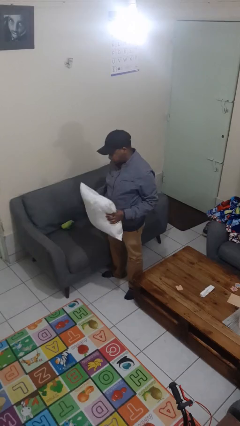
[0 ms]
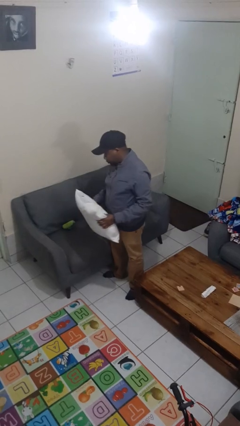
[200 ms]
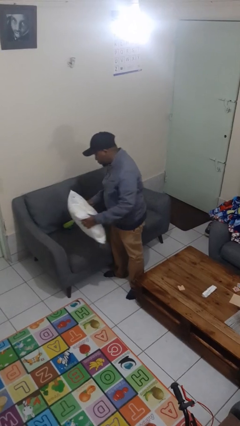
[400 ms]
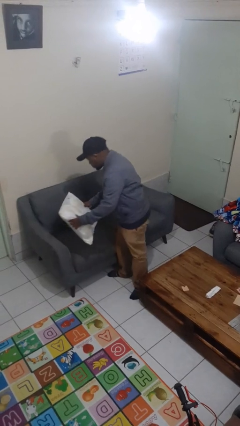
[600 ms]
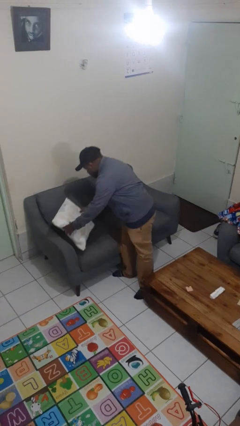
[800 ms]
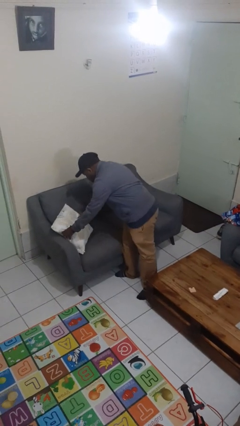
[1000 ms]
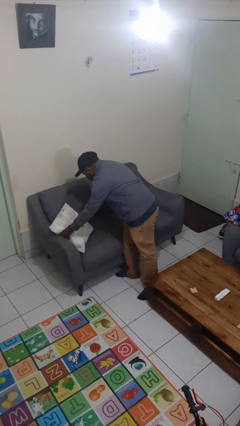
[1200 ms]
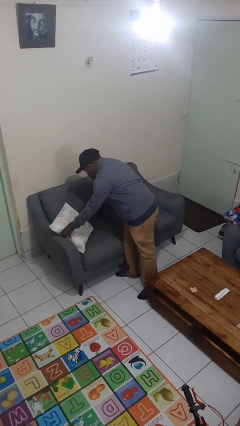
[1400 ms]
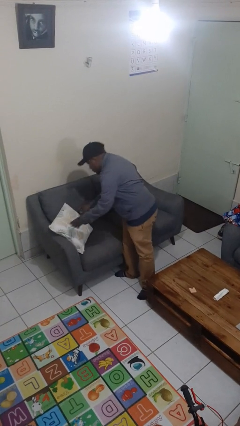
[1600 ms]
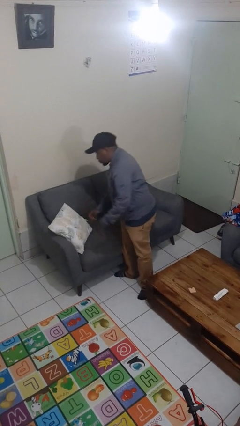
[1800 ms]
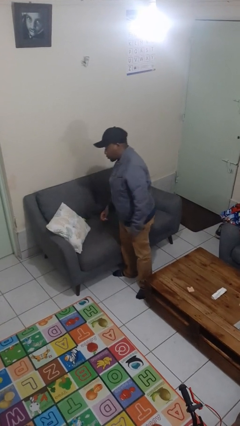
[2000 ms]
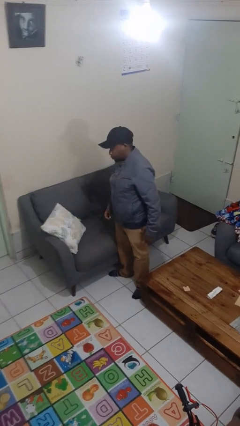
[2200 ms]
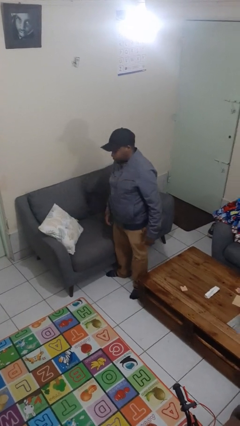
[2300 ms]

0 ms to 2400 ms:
person puts down object on couch

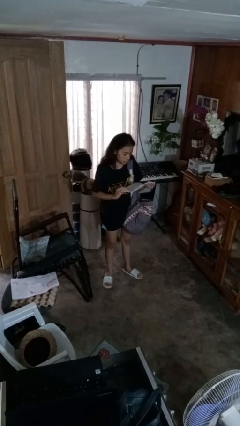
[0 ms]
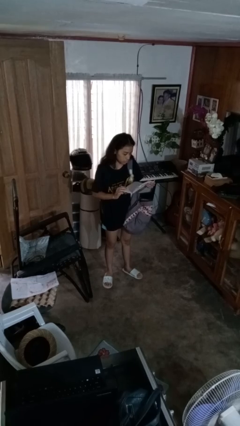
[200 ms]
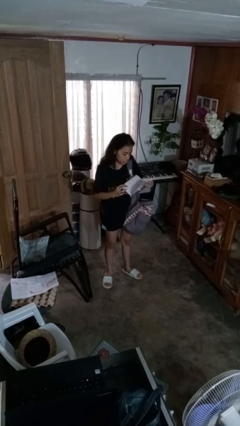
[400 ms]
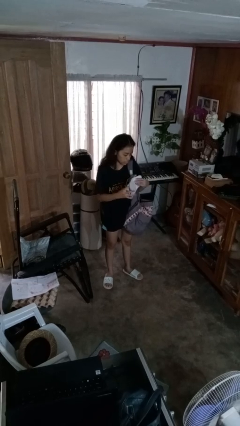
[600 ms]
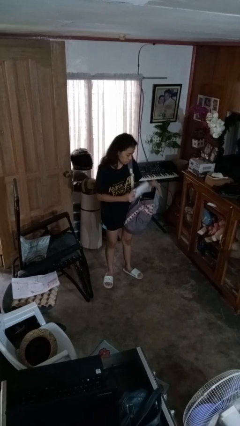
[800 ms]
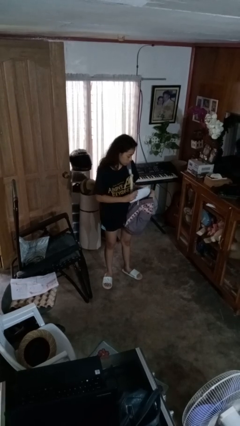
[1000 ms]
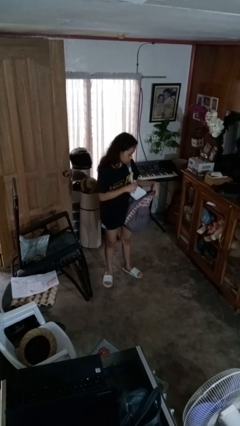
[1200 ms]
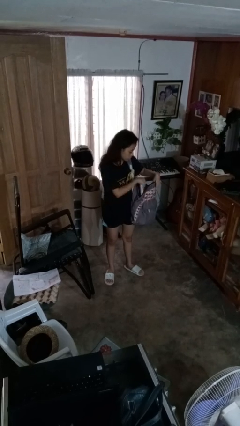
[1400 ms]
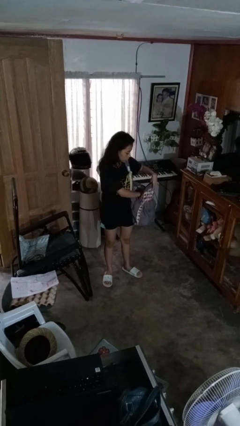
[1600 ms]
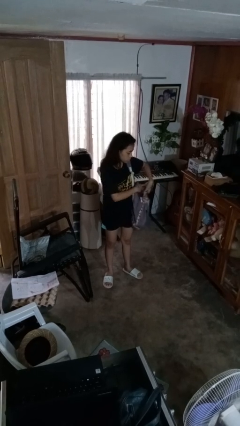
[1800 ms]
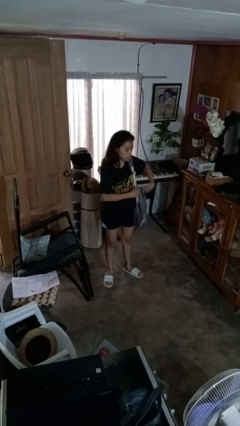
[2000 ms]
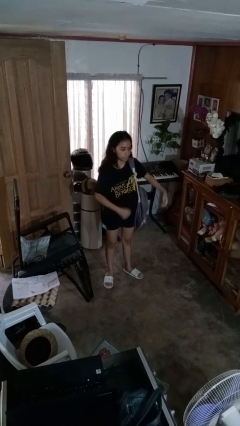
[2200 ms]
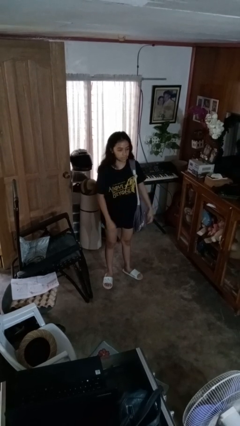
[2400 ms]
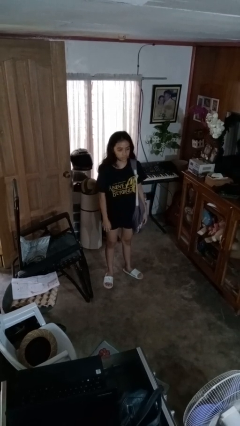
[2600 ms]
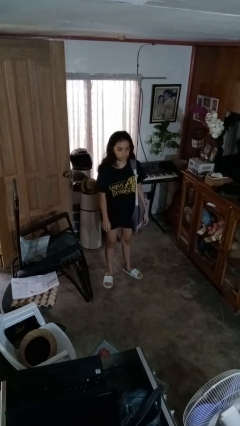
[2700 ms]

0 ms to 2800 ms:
person puts object into backpack

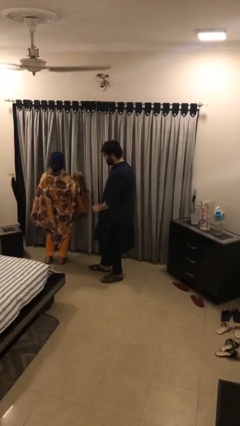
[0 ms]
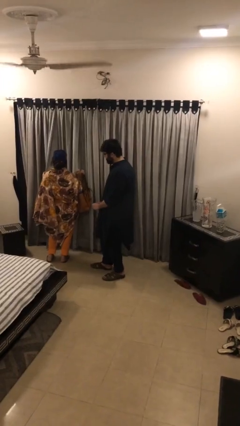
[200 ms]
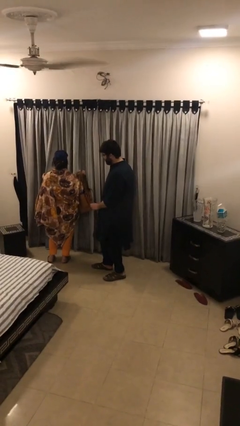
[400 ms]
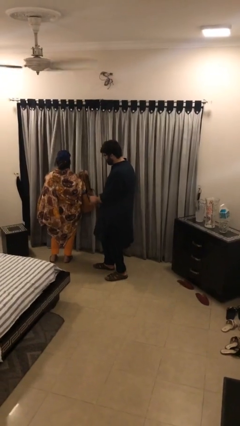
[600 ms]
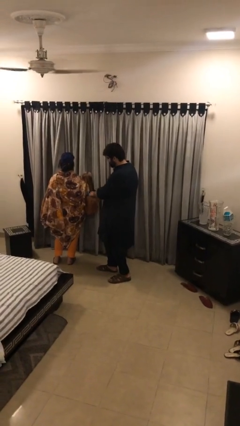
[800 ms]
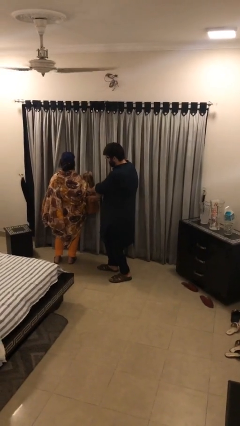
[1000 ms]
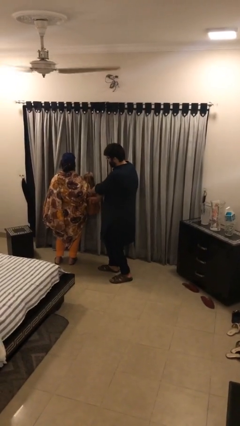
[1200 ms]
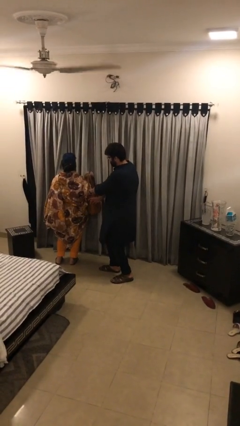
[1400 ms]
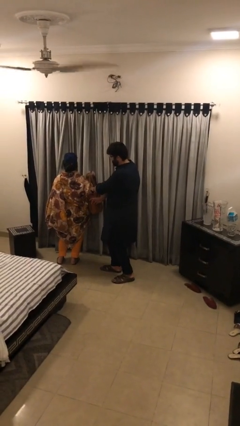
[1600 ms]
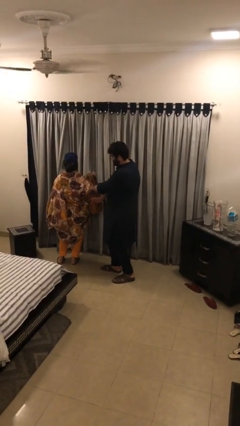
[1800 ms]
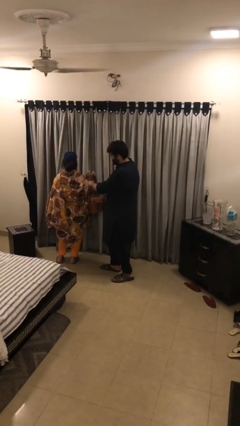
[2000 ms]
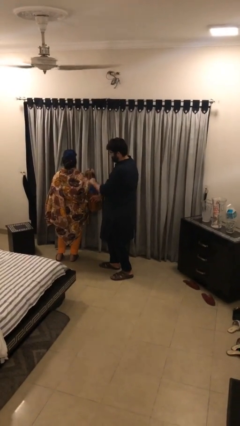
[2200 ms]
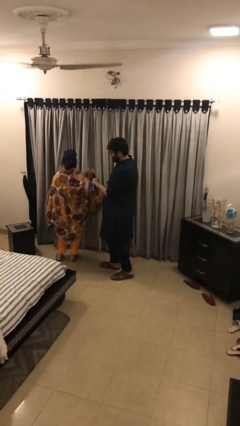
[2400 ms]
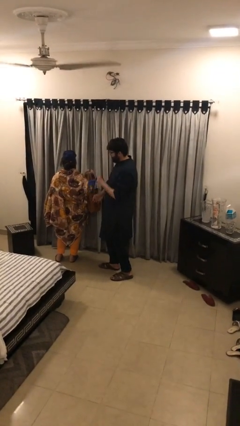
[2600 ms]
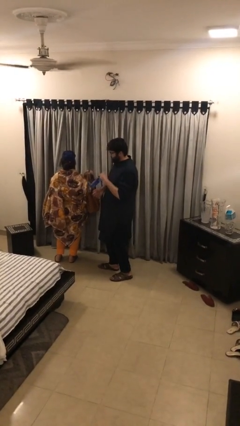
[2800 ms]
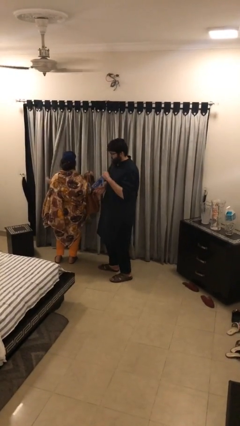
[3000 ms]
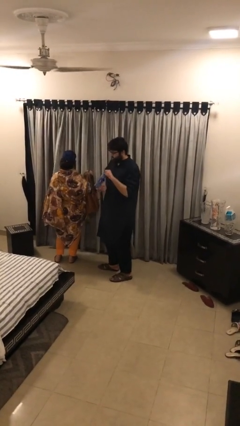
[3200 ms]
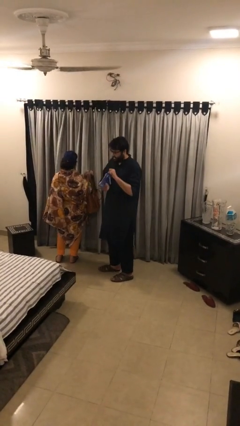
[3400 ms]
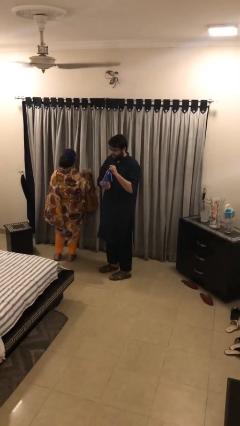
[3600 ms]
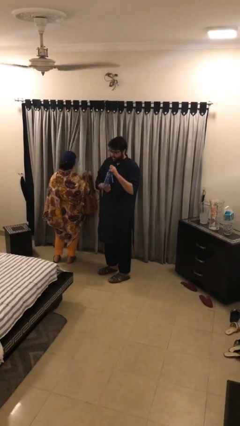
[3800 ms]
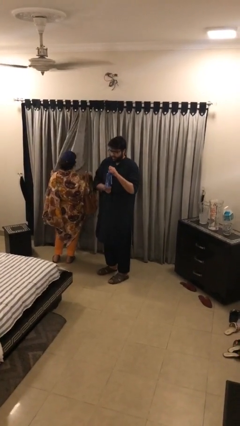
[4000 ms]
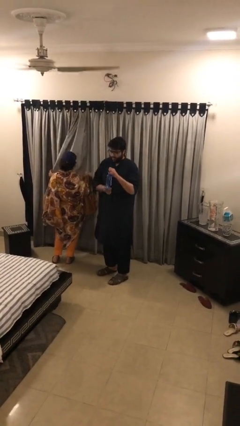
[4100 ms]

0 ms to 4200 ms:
person steals object from person

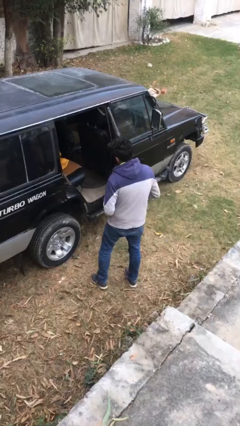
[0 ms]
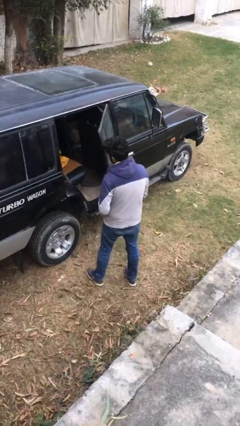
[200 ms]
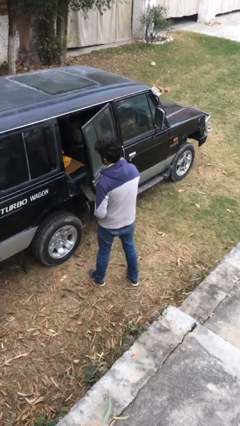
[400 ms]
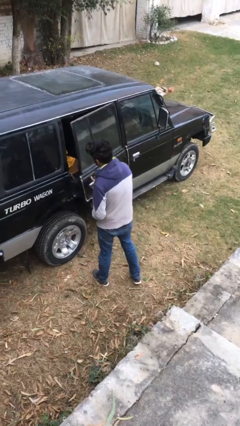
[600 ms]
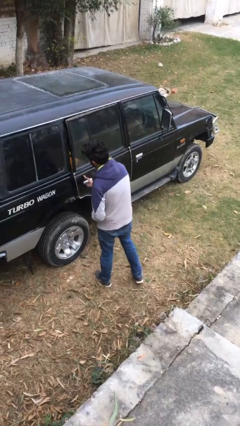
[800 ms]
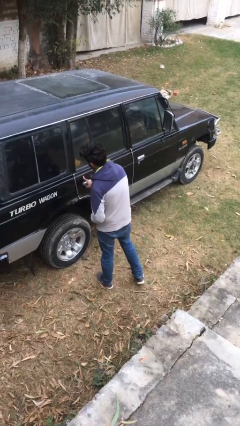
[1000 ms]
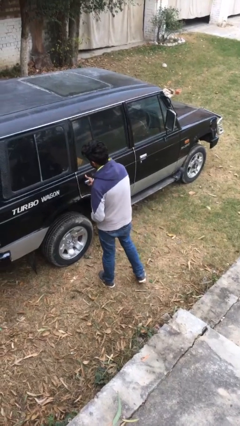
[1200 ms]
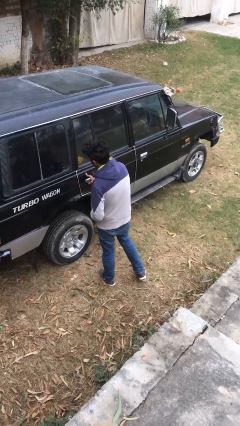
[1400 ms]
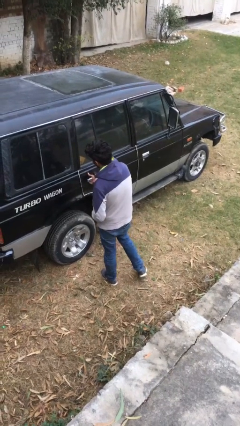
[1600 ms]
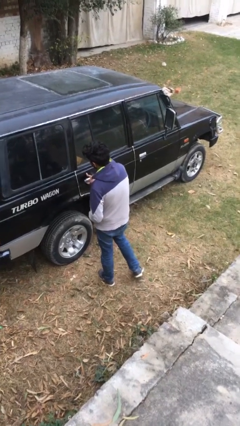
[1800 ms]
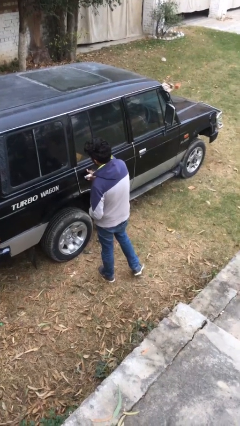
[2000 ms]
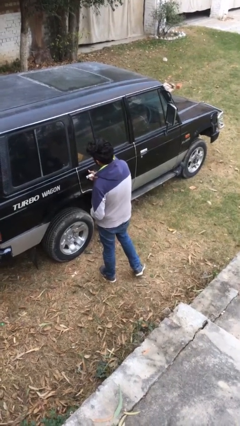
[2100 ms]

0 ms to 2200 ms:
person closes car door

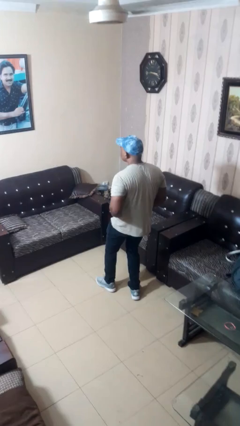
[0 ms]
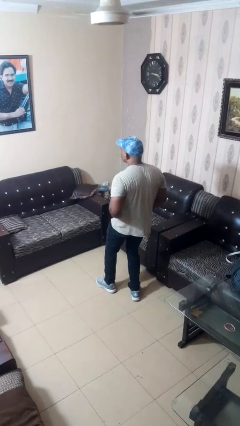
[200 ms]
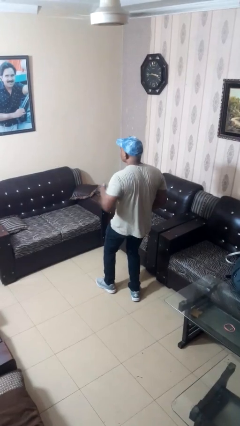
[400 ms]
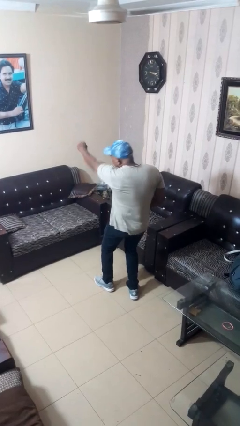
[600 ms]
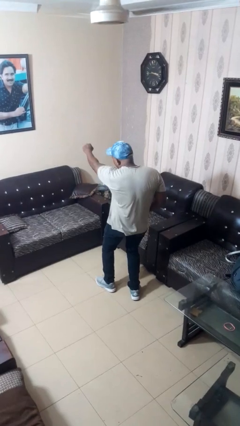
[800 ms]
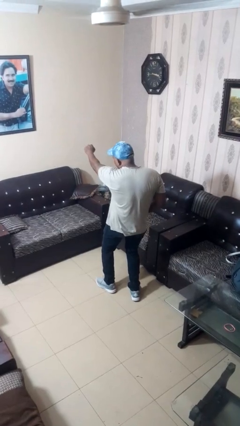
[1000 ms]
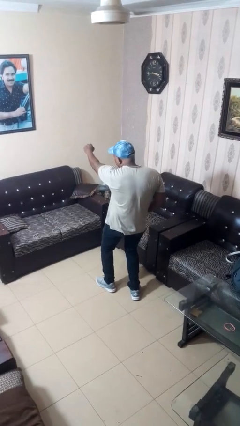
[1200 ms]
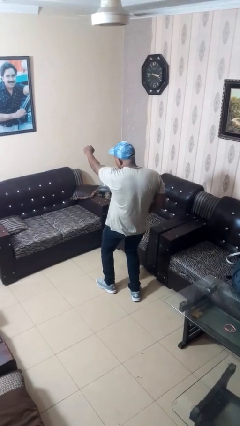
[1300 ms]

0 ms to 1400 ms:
person karate chop

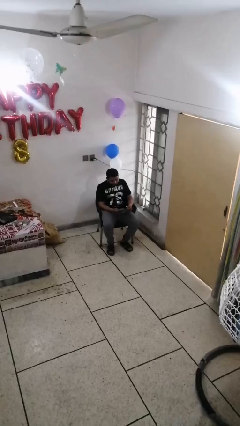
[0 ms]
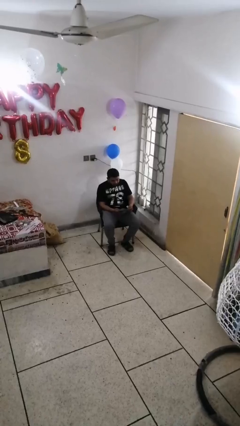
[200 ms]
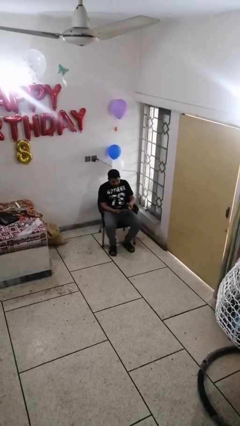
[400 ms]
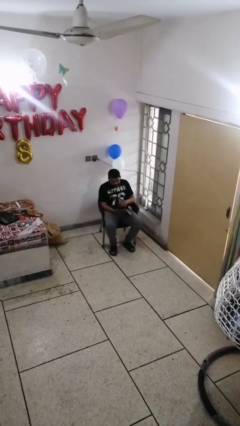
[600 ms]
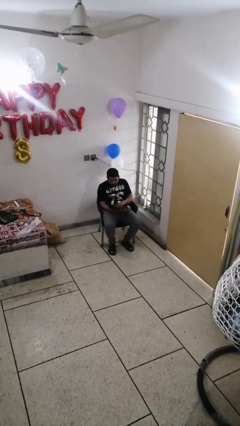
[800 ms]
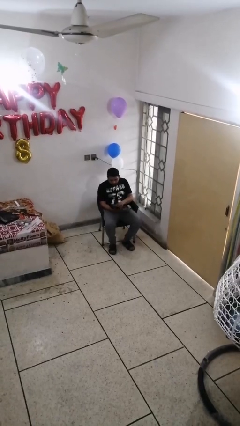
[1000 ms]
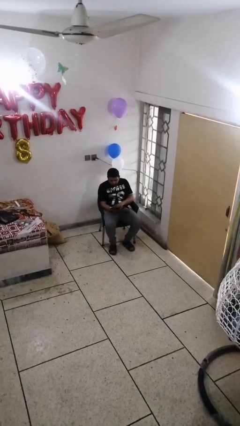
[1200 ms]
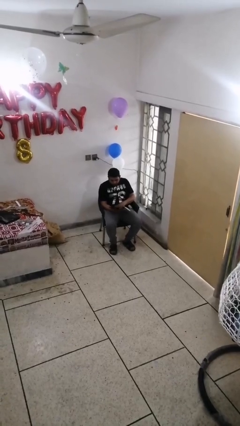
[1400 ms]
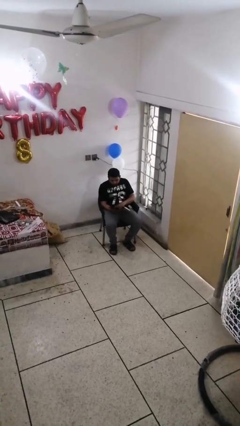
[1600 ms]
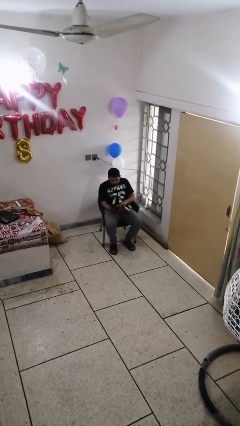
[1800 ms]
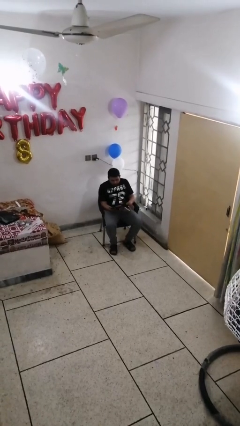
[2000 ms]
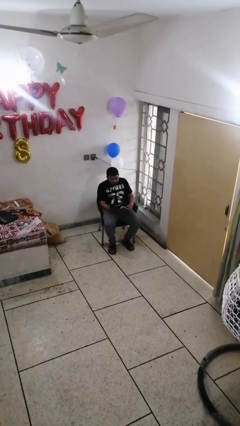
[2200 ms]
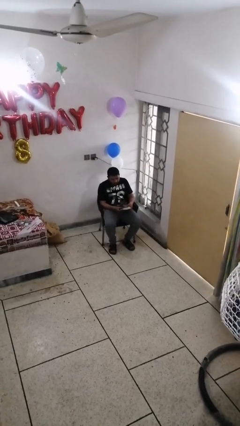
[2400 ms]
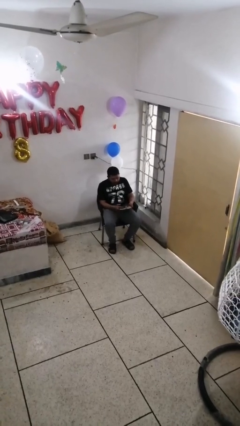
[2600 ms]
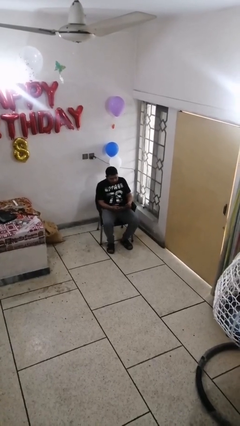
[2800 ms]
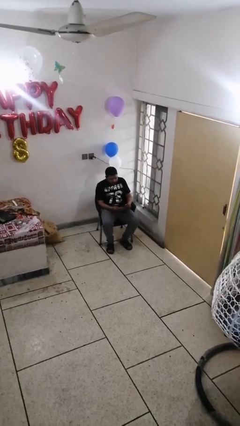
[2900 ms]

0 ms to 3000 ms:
person reads document

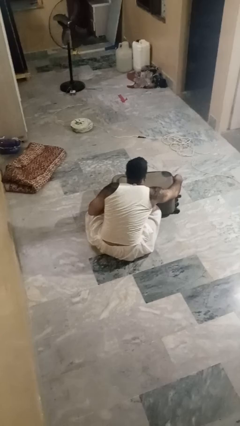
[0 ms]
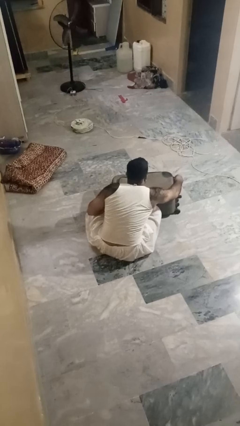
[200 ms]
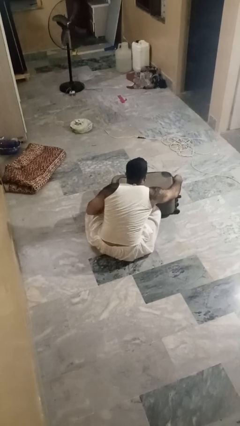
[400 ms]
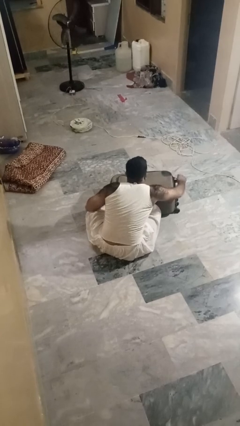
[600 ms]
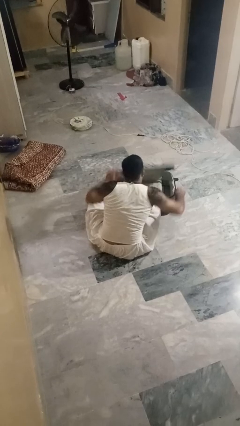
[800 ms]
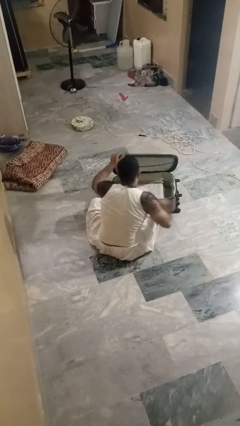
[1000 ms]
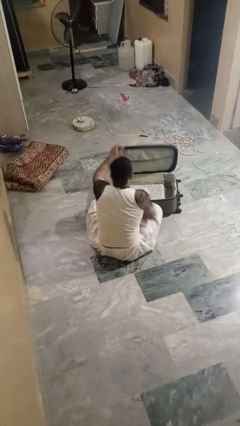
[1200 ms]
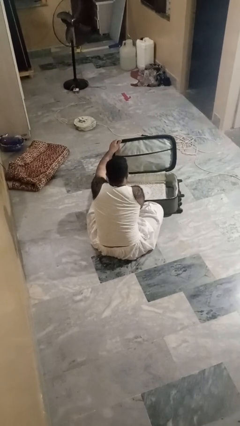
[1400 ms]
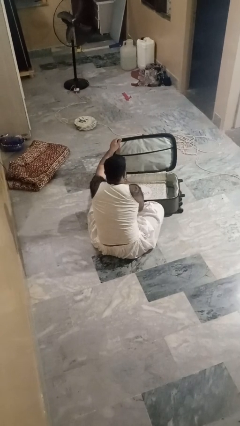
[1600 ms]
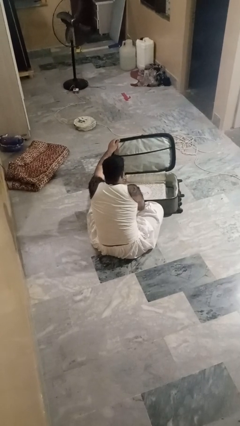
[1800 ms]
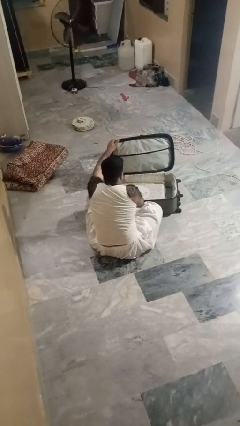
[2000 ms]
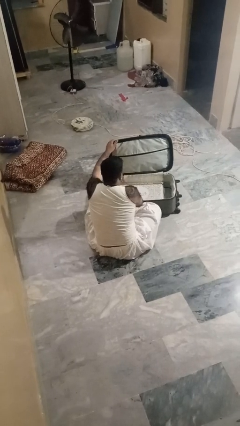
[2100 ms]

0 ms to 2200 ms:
person opens suitcase
